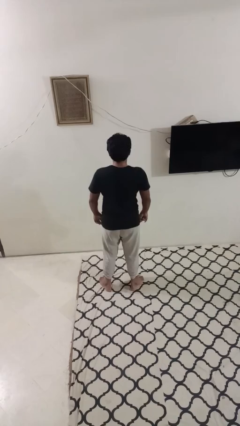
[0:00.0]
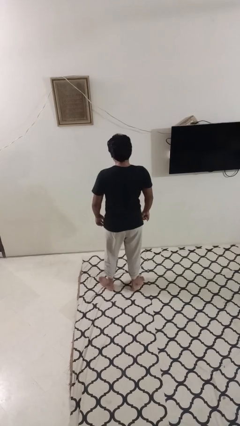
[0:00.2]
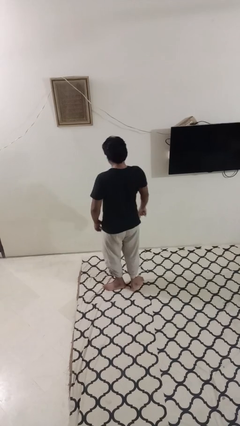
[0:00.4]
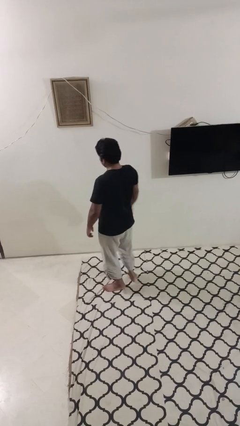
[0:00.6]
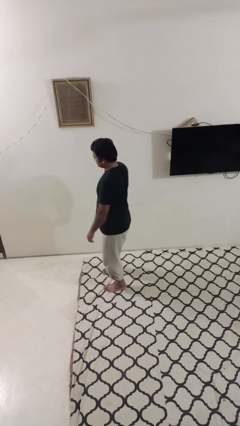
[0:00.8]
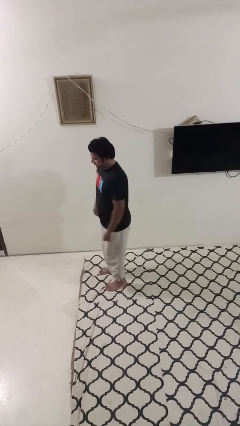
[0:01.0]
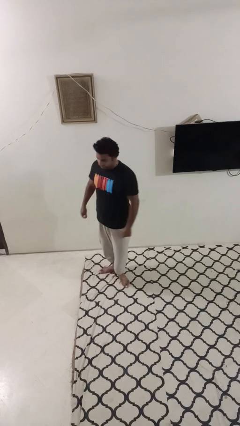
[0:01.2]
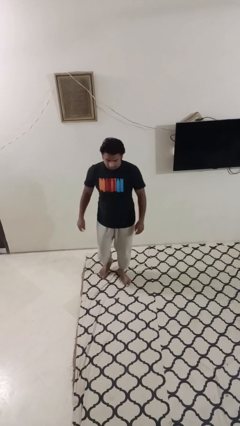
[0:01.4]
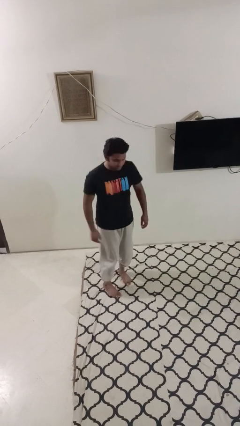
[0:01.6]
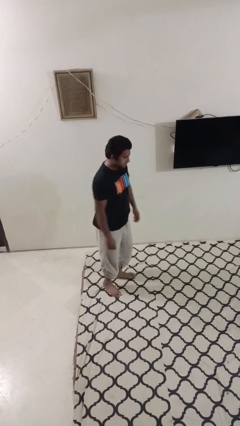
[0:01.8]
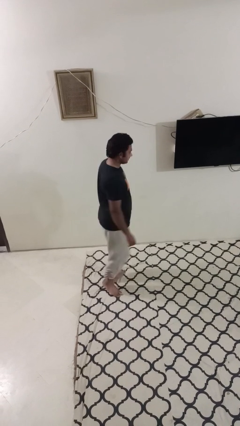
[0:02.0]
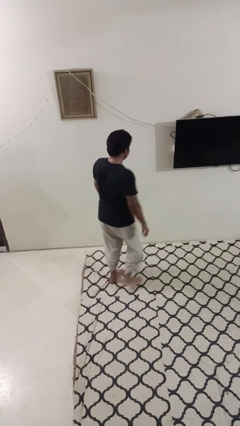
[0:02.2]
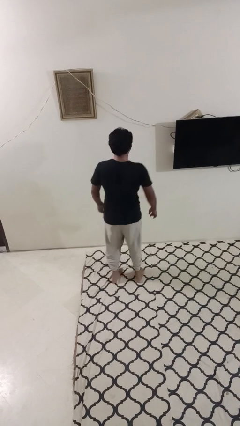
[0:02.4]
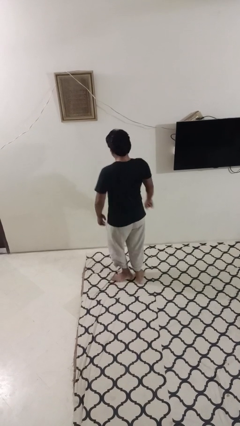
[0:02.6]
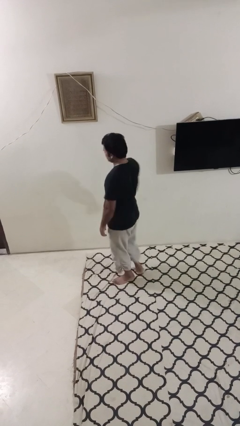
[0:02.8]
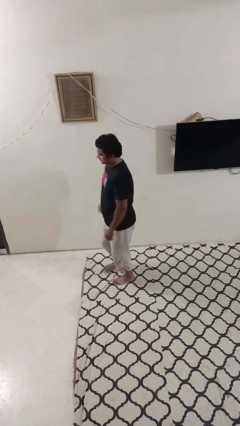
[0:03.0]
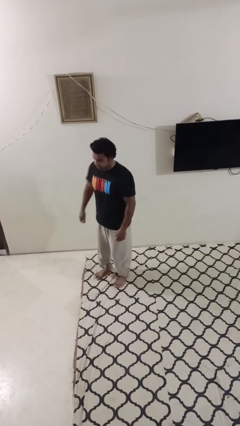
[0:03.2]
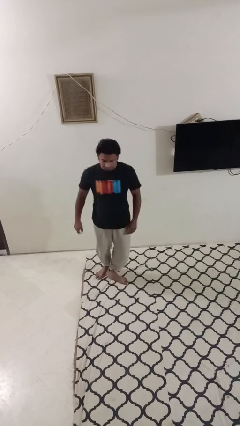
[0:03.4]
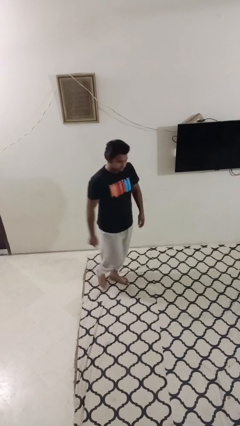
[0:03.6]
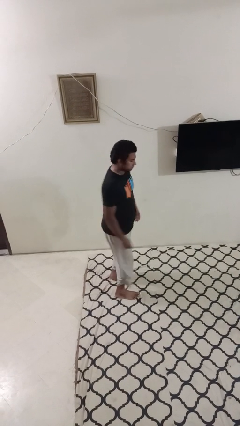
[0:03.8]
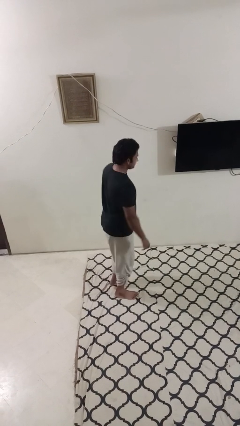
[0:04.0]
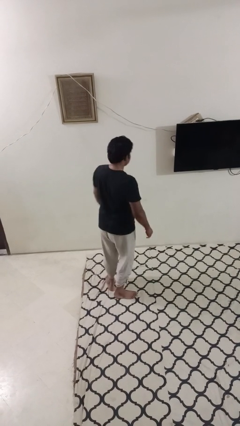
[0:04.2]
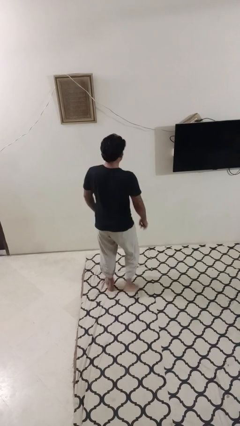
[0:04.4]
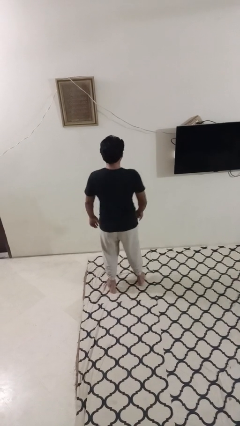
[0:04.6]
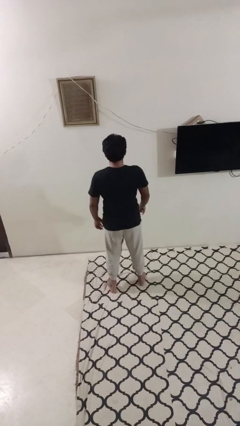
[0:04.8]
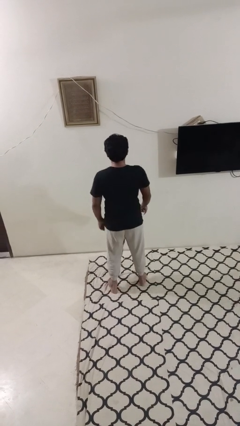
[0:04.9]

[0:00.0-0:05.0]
person twirls

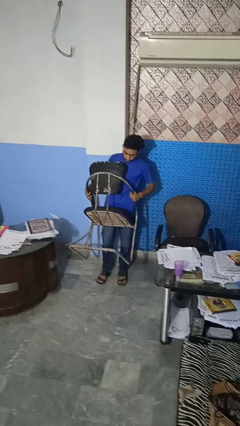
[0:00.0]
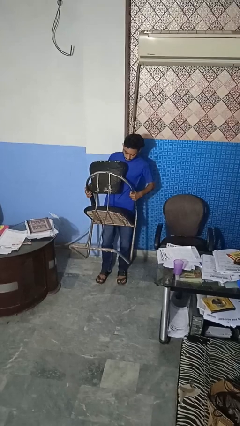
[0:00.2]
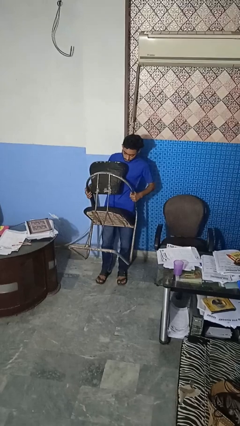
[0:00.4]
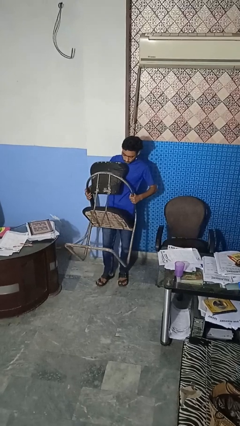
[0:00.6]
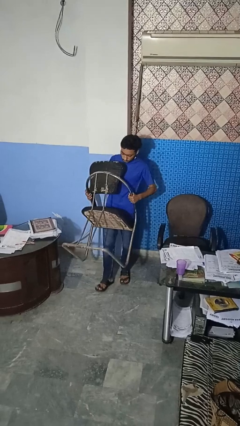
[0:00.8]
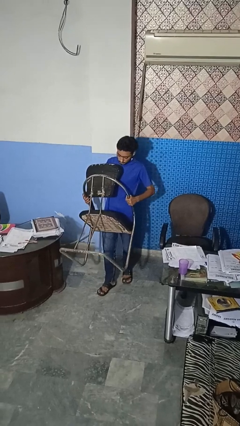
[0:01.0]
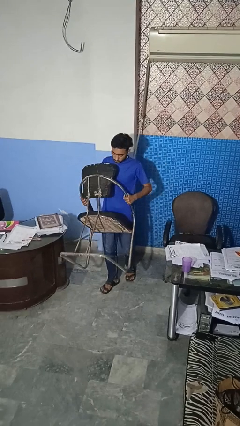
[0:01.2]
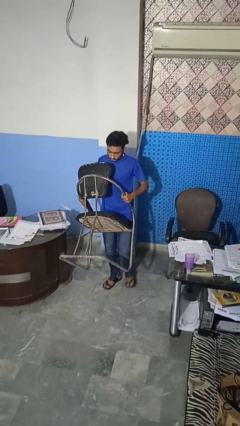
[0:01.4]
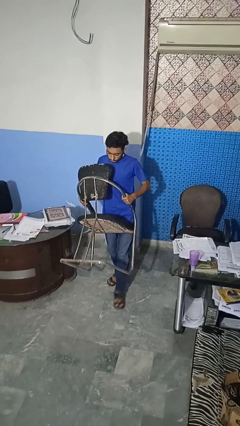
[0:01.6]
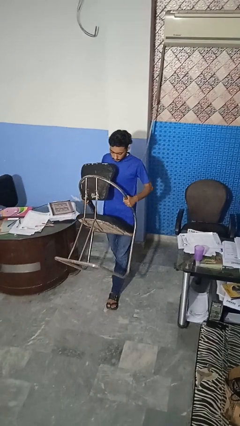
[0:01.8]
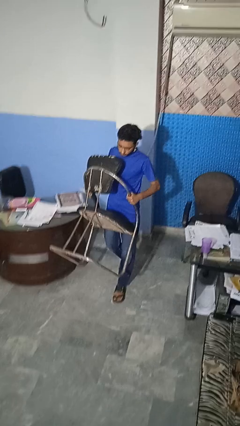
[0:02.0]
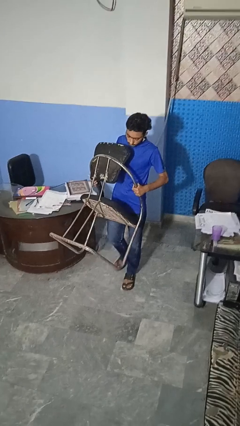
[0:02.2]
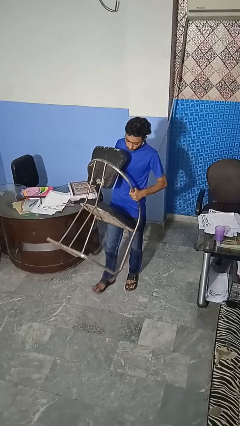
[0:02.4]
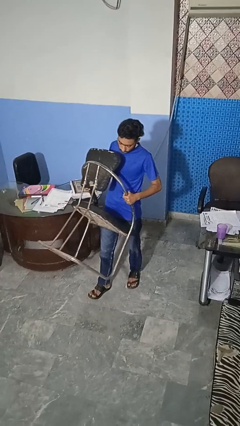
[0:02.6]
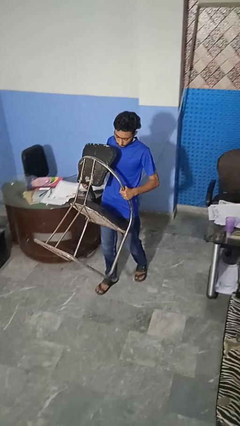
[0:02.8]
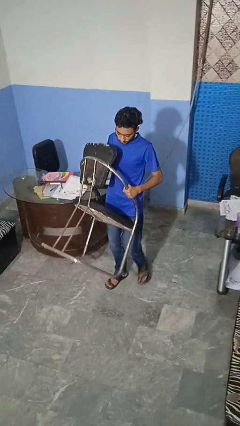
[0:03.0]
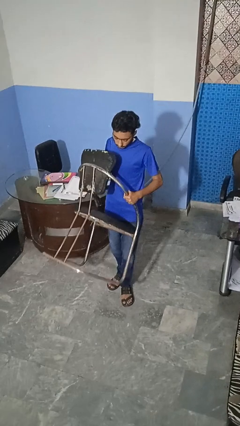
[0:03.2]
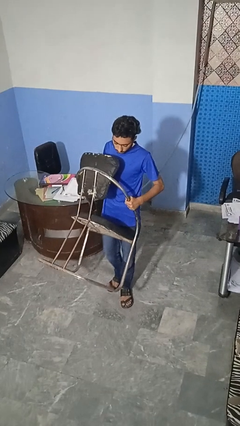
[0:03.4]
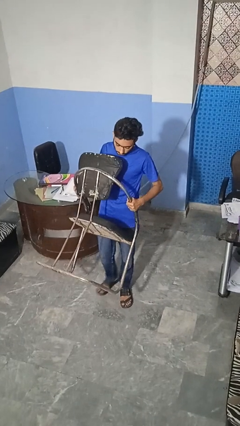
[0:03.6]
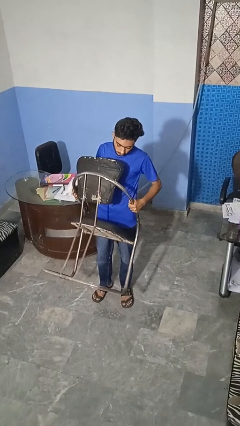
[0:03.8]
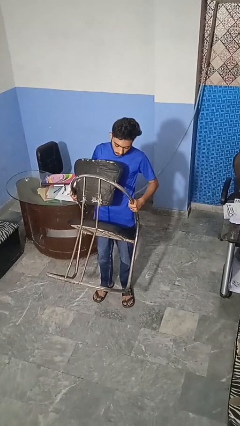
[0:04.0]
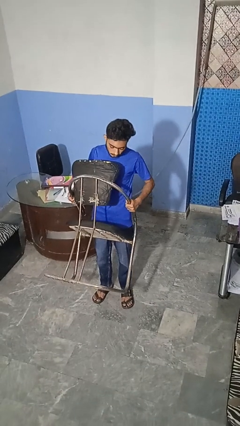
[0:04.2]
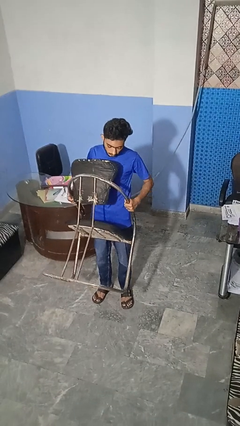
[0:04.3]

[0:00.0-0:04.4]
person carries furniture

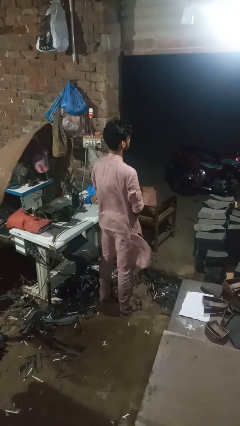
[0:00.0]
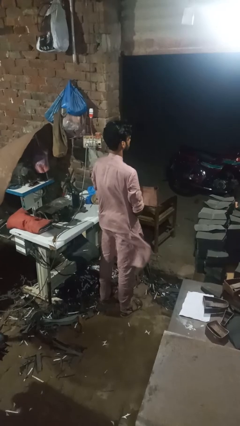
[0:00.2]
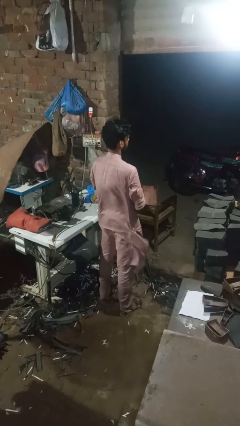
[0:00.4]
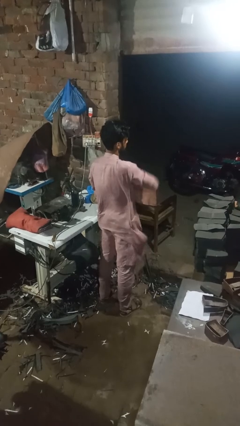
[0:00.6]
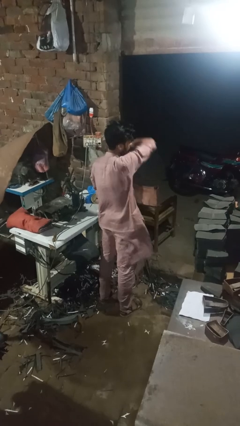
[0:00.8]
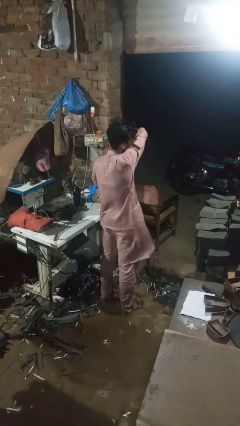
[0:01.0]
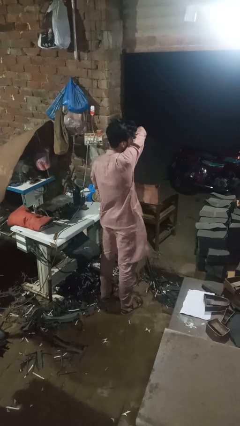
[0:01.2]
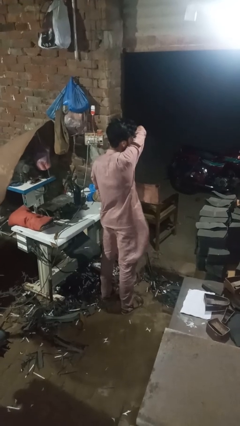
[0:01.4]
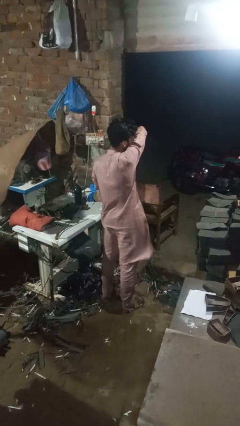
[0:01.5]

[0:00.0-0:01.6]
person sneezes into arm

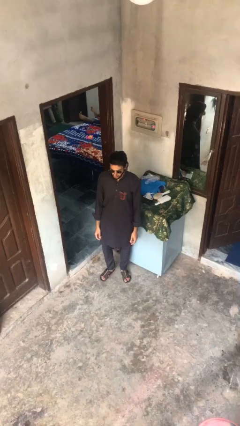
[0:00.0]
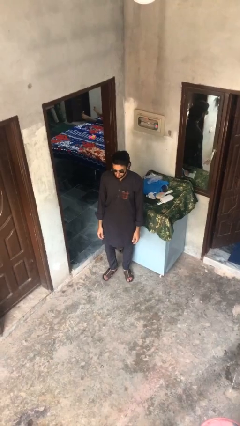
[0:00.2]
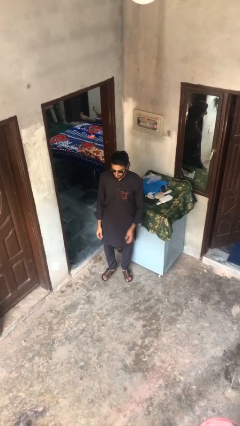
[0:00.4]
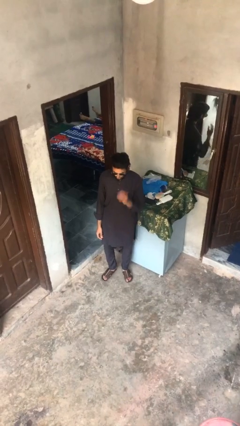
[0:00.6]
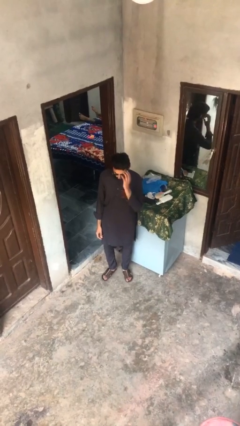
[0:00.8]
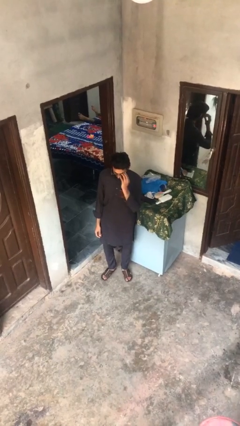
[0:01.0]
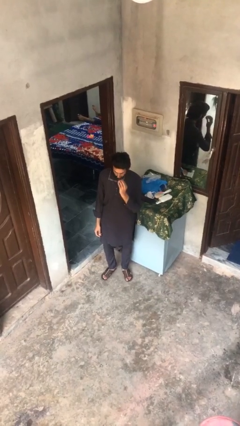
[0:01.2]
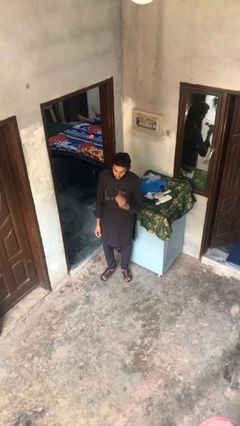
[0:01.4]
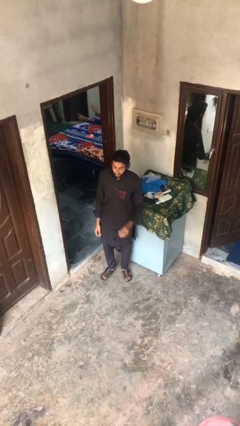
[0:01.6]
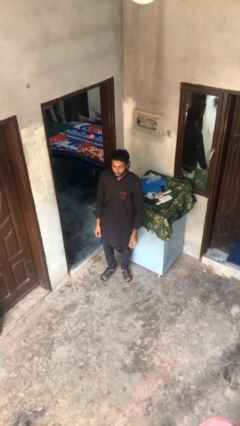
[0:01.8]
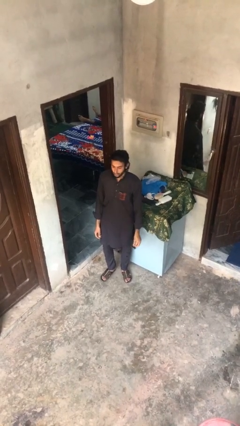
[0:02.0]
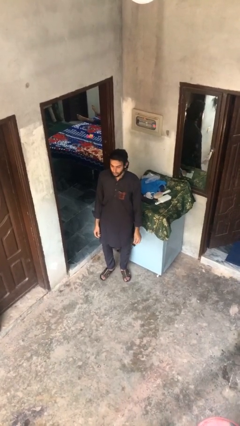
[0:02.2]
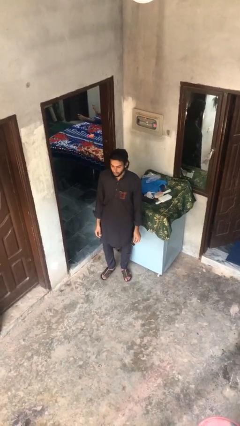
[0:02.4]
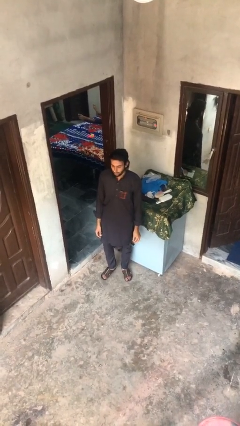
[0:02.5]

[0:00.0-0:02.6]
person takes off sunglasses

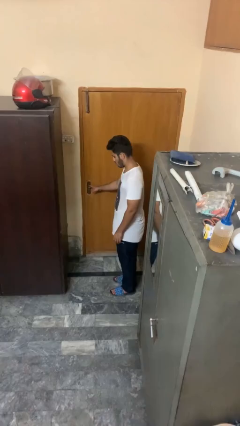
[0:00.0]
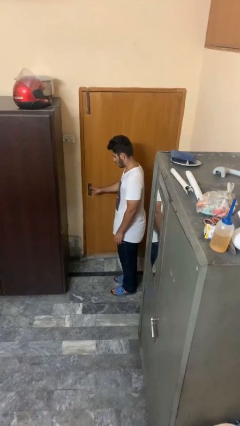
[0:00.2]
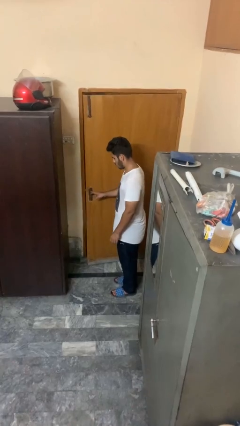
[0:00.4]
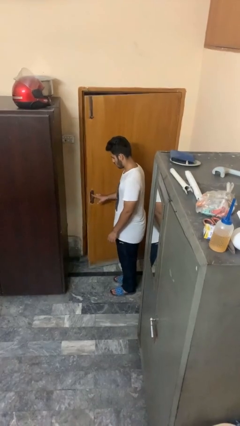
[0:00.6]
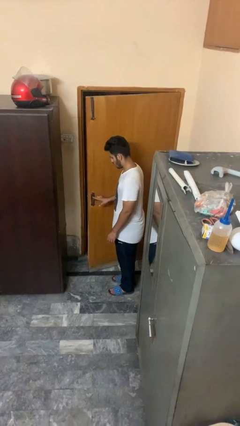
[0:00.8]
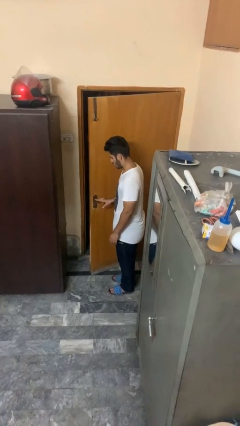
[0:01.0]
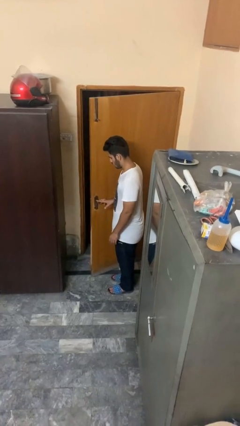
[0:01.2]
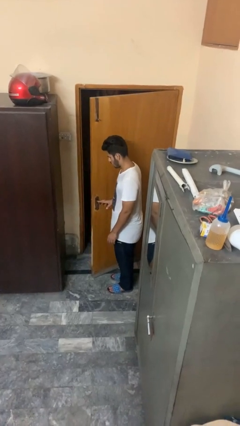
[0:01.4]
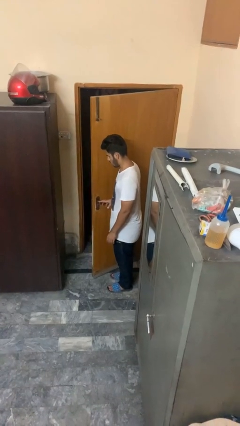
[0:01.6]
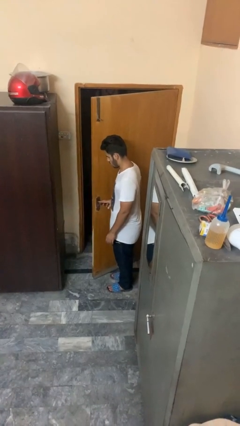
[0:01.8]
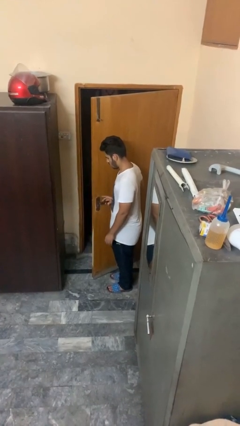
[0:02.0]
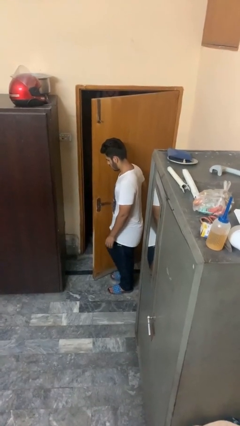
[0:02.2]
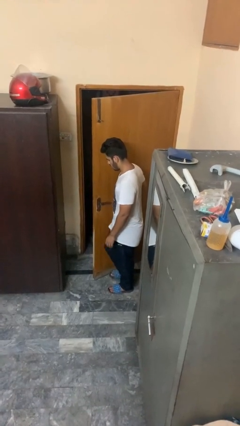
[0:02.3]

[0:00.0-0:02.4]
person opens facility door

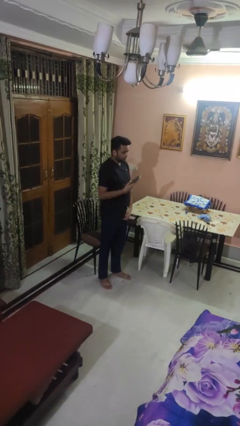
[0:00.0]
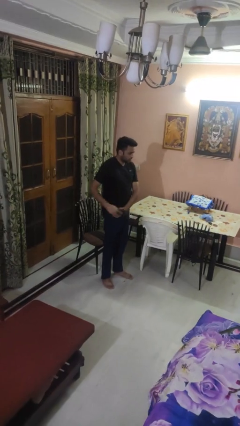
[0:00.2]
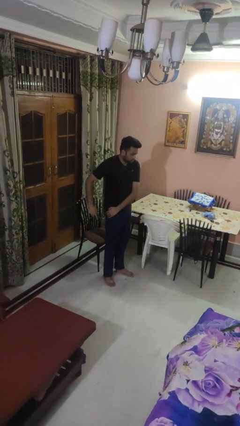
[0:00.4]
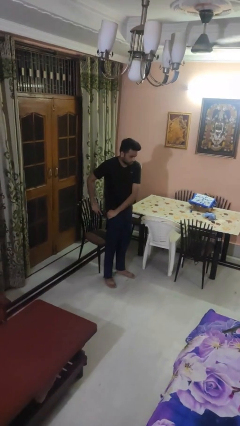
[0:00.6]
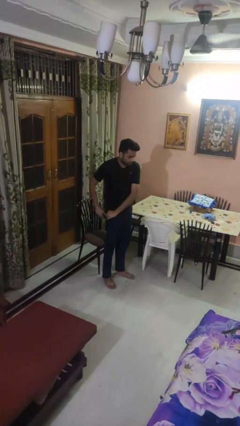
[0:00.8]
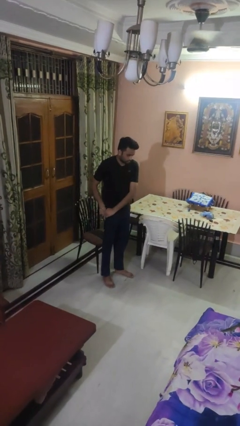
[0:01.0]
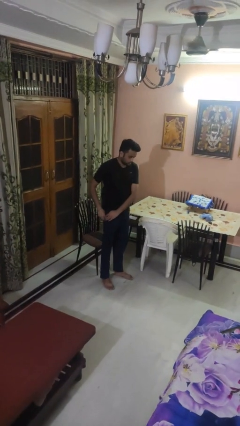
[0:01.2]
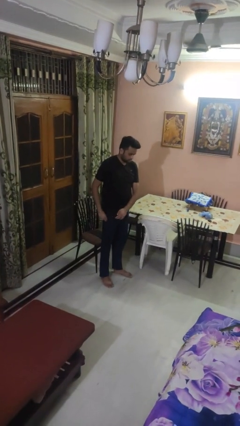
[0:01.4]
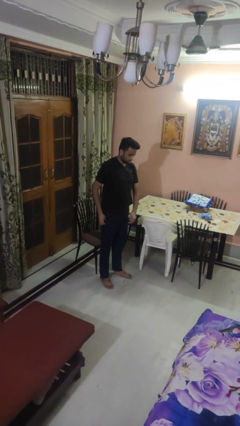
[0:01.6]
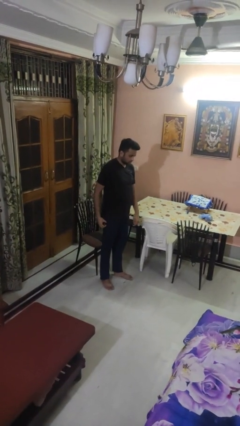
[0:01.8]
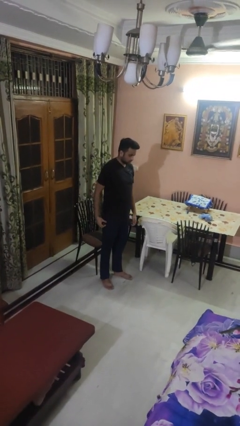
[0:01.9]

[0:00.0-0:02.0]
person puts phone into pocket
